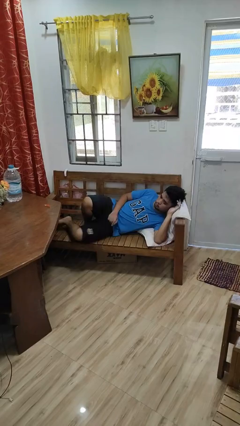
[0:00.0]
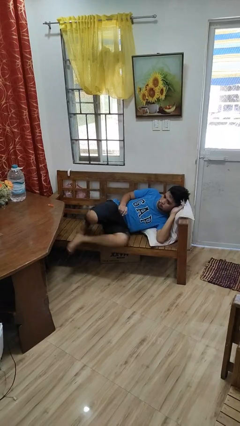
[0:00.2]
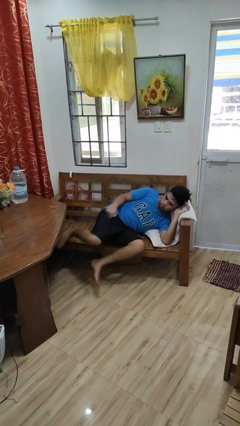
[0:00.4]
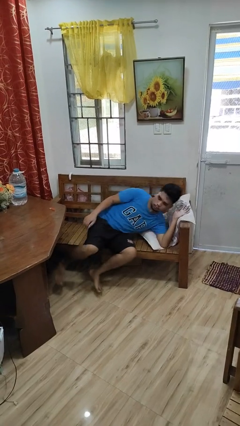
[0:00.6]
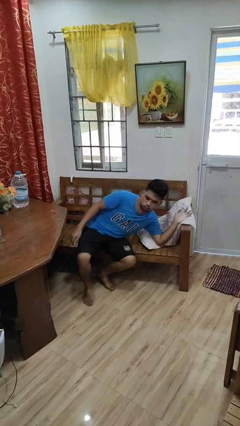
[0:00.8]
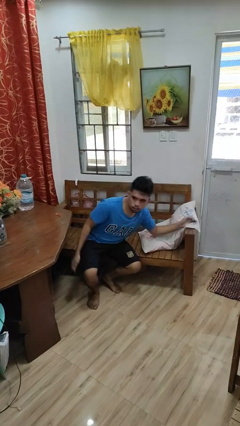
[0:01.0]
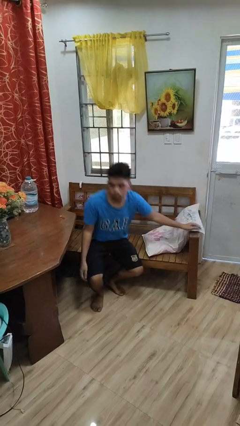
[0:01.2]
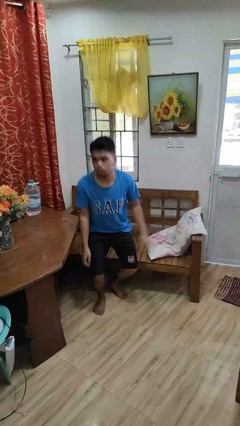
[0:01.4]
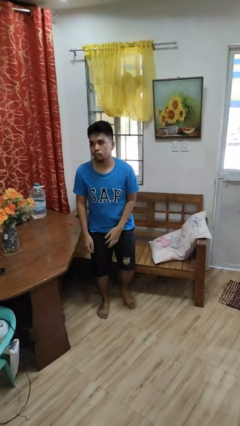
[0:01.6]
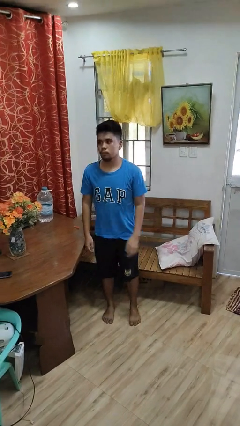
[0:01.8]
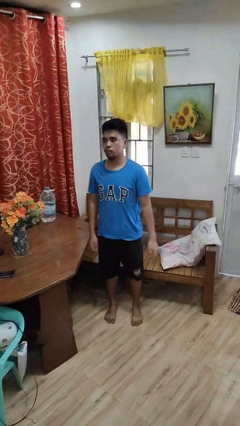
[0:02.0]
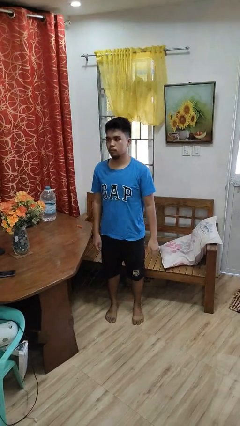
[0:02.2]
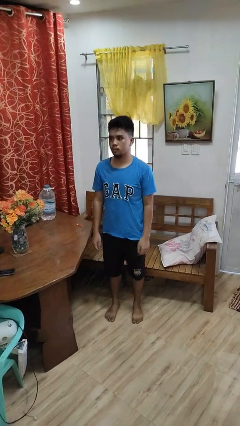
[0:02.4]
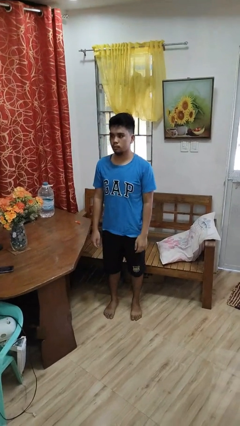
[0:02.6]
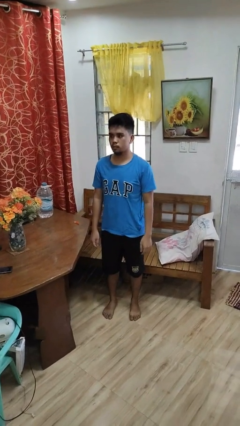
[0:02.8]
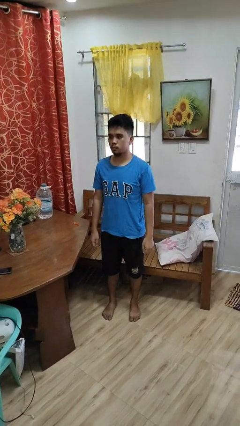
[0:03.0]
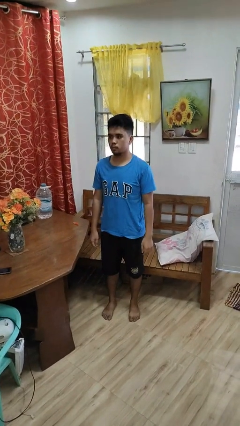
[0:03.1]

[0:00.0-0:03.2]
person stands up

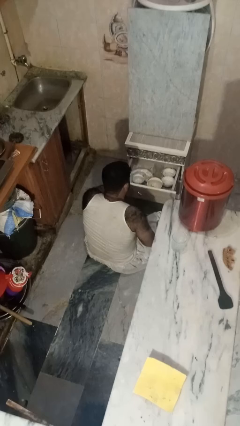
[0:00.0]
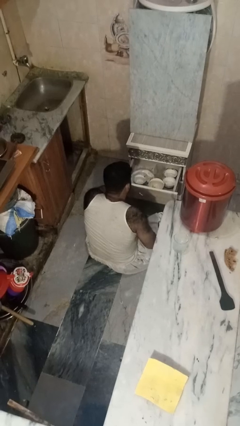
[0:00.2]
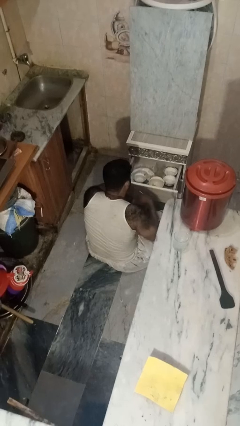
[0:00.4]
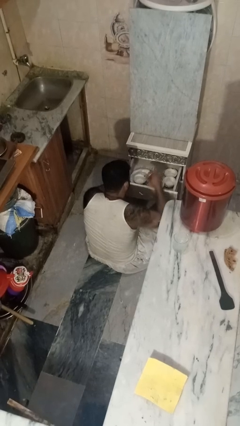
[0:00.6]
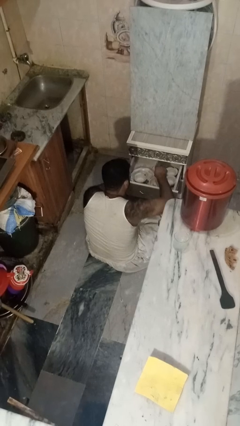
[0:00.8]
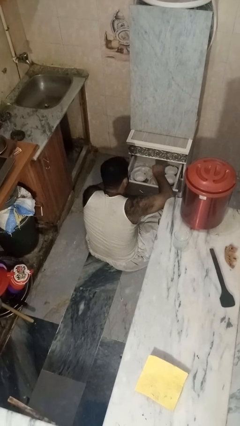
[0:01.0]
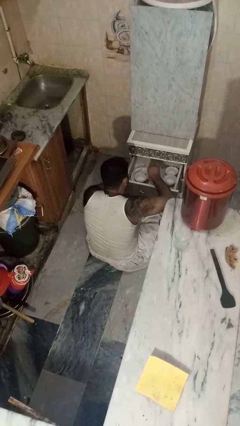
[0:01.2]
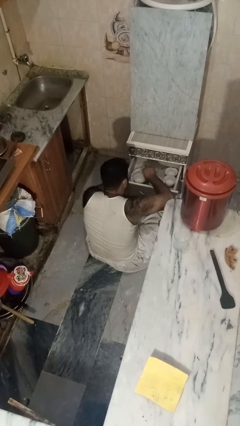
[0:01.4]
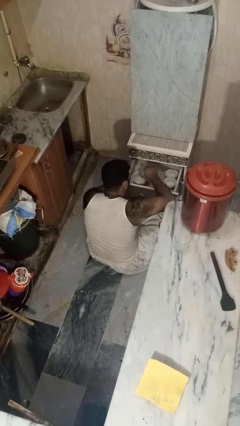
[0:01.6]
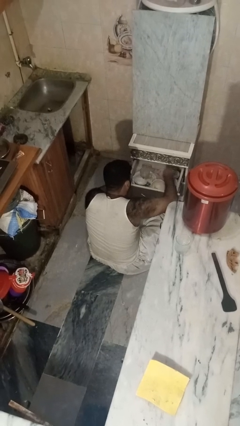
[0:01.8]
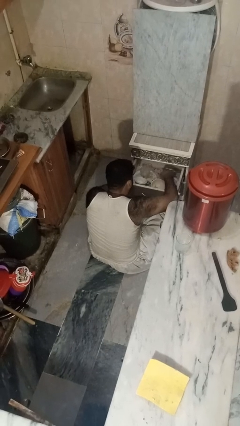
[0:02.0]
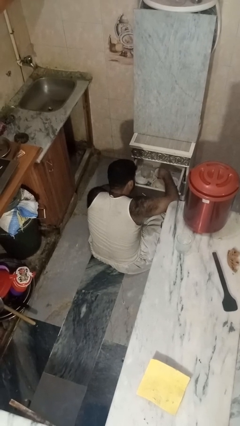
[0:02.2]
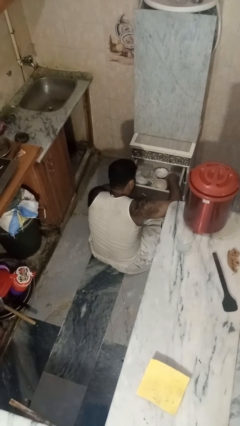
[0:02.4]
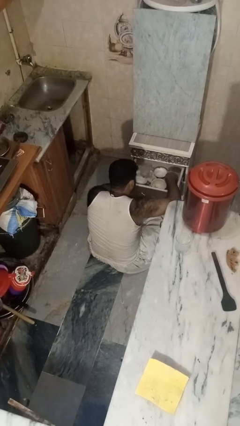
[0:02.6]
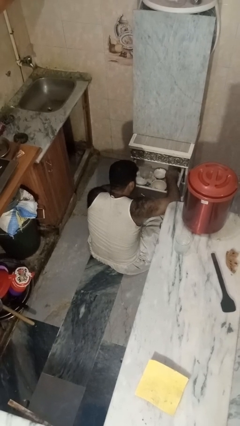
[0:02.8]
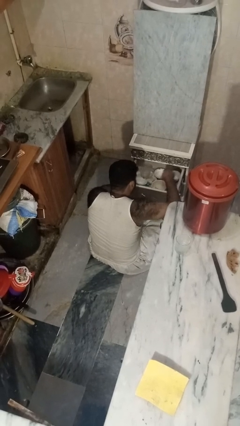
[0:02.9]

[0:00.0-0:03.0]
person searches in kitchen drawer

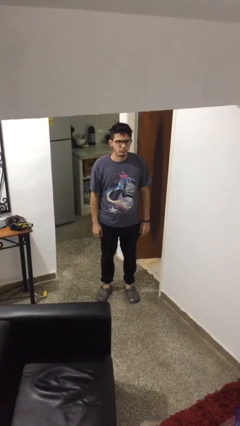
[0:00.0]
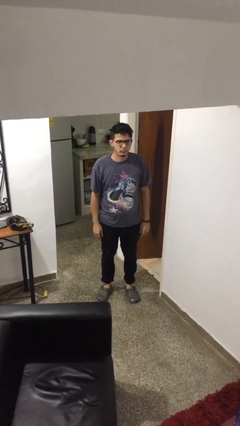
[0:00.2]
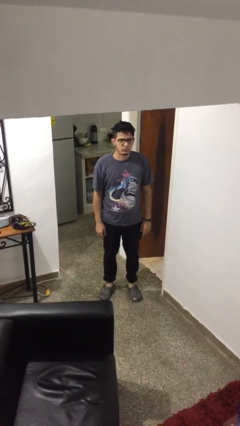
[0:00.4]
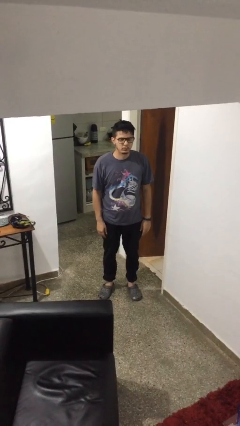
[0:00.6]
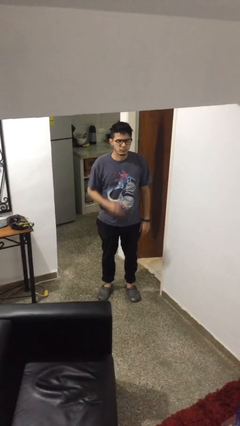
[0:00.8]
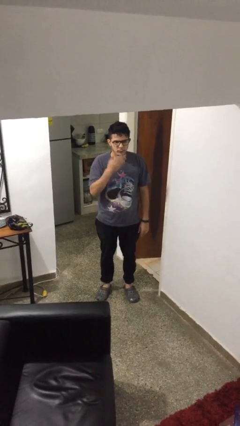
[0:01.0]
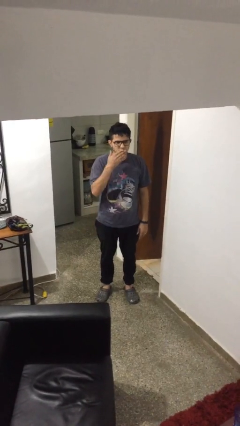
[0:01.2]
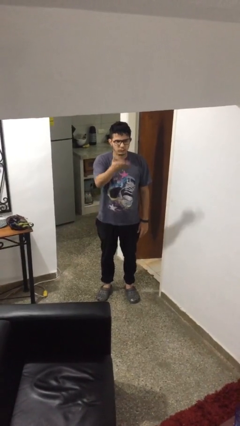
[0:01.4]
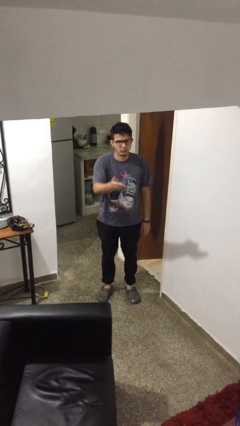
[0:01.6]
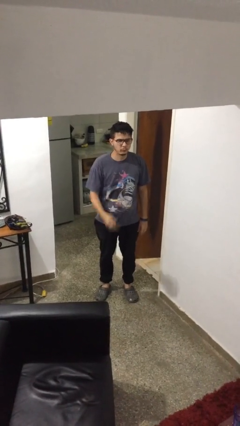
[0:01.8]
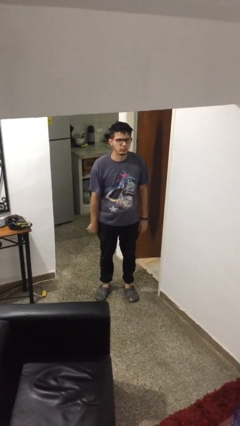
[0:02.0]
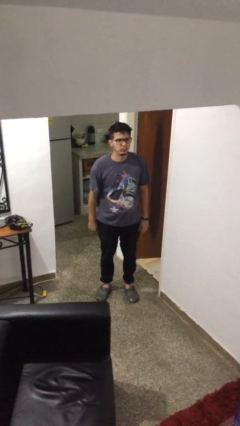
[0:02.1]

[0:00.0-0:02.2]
person gestures blow kiss

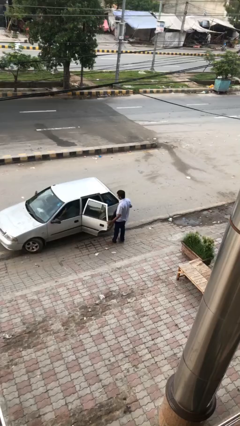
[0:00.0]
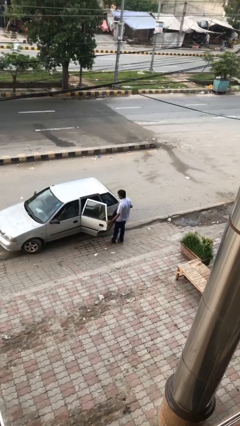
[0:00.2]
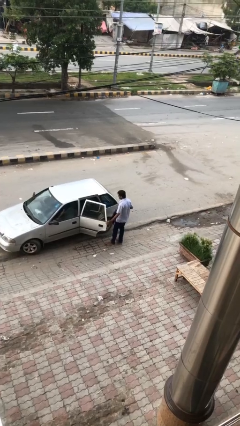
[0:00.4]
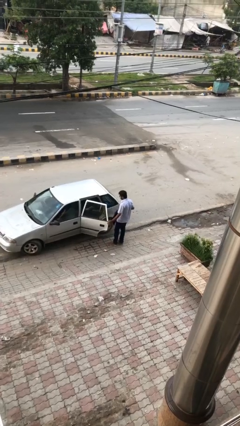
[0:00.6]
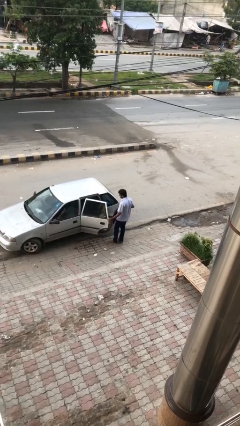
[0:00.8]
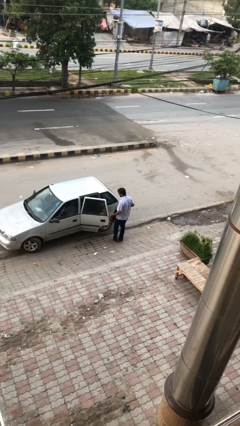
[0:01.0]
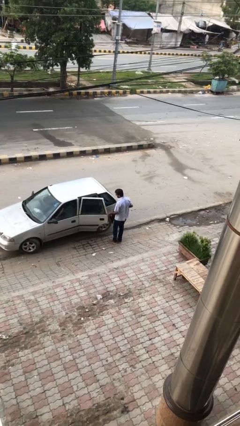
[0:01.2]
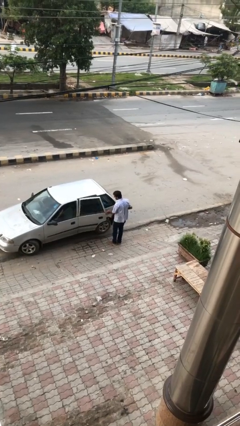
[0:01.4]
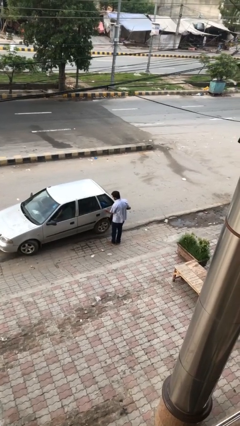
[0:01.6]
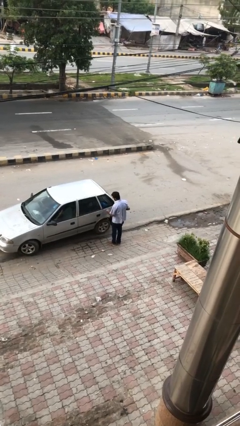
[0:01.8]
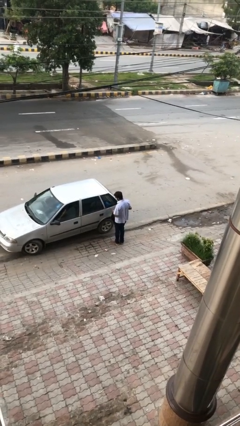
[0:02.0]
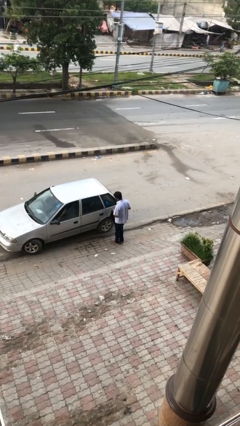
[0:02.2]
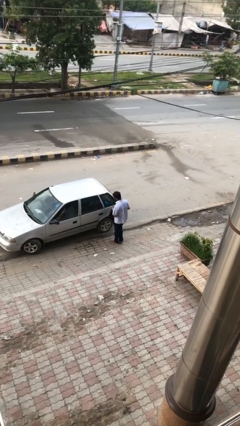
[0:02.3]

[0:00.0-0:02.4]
person closes car door

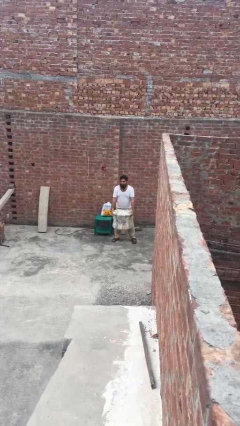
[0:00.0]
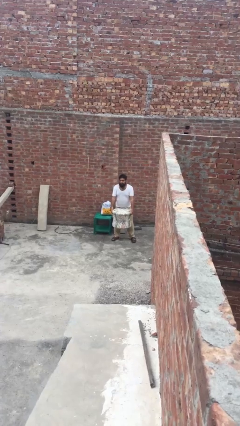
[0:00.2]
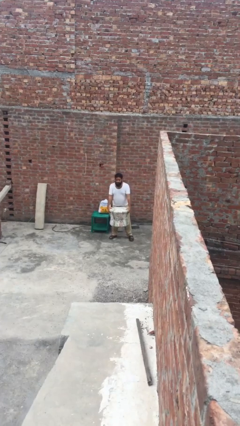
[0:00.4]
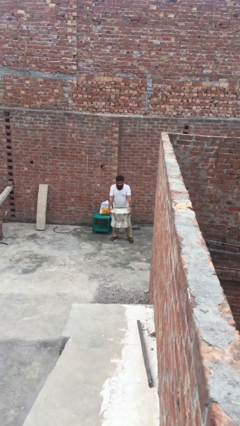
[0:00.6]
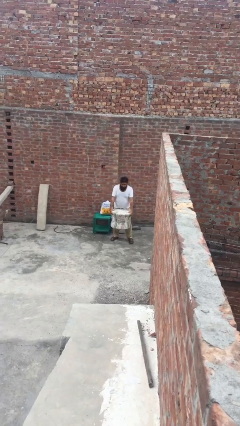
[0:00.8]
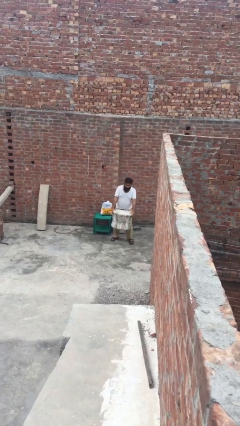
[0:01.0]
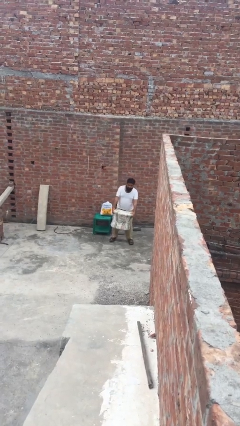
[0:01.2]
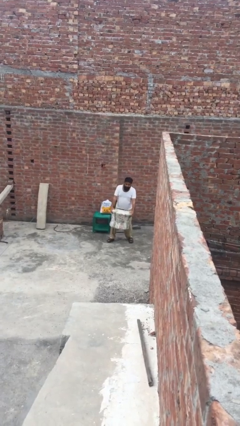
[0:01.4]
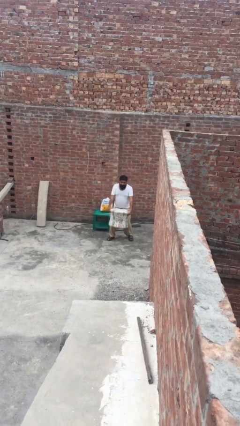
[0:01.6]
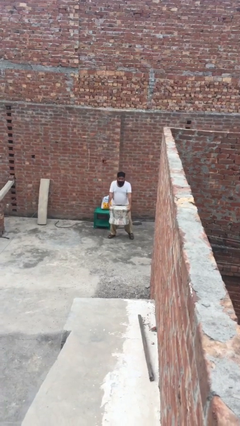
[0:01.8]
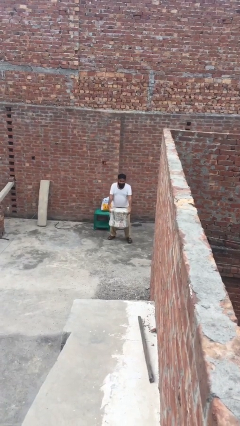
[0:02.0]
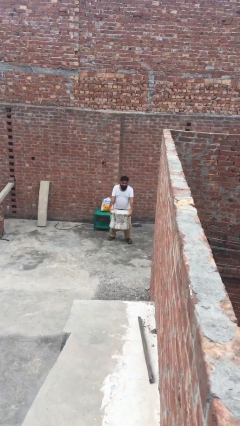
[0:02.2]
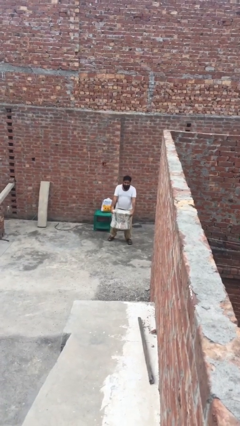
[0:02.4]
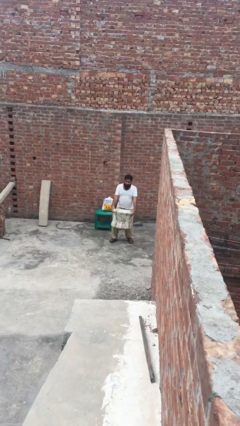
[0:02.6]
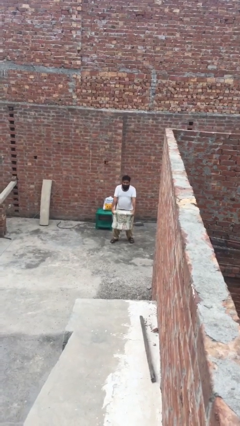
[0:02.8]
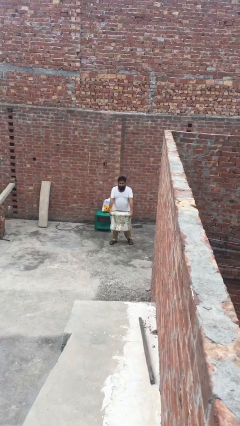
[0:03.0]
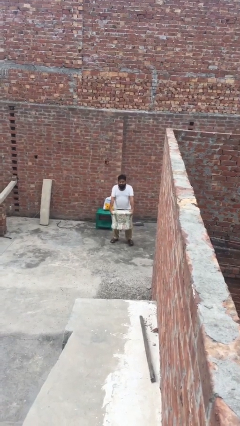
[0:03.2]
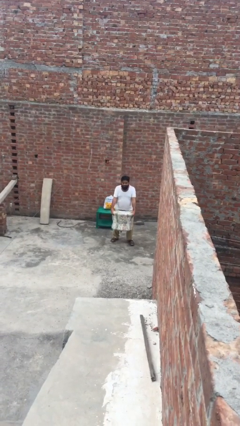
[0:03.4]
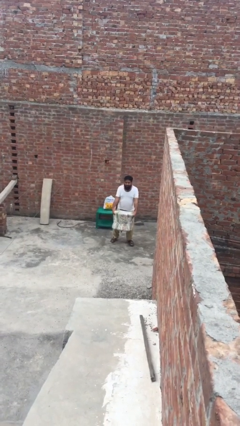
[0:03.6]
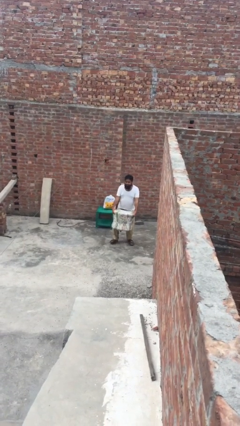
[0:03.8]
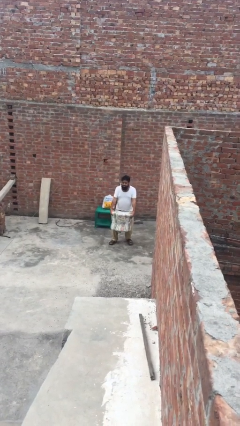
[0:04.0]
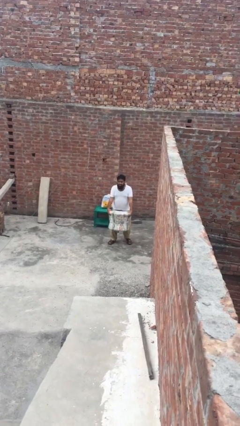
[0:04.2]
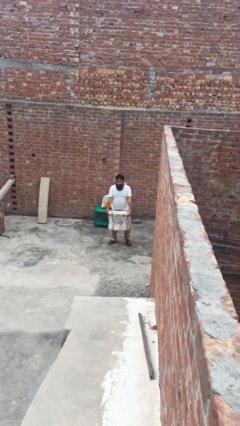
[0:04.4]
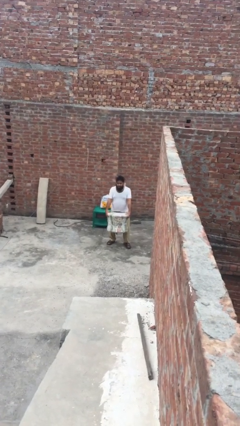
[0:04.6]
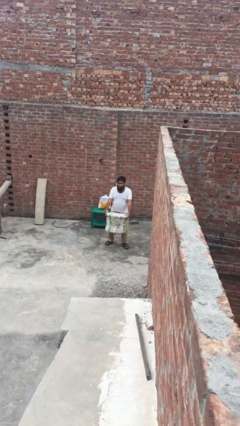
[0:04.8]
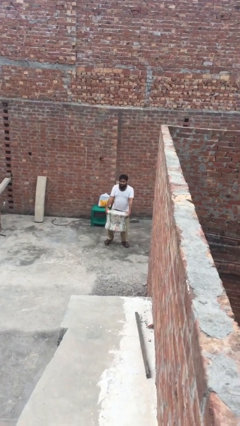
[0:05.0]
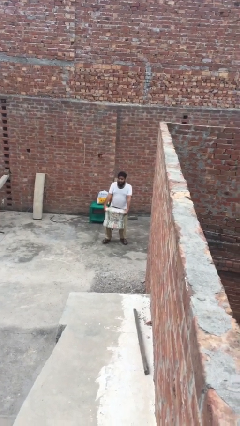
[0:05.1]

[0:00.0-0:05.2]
person carries heavy object

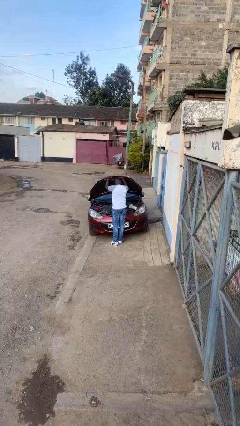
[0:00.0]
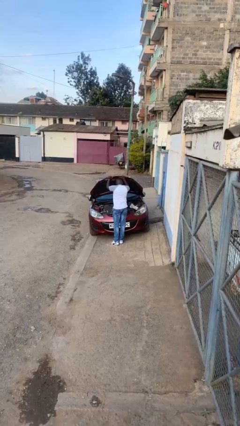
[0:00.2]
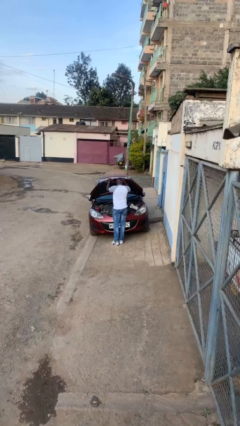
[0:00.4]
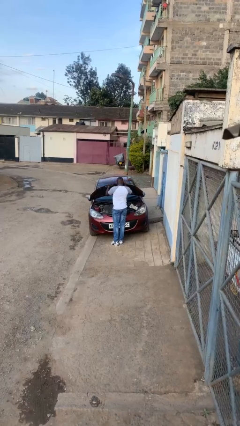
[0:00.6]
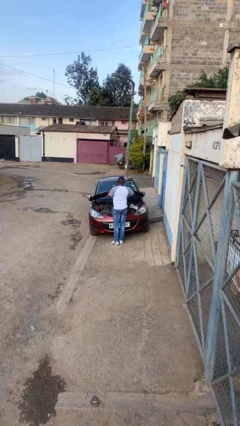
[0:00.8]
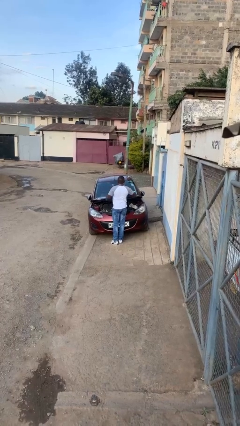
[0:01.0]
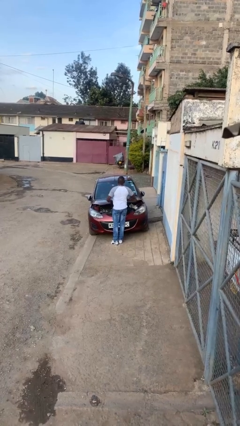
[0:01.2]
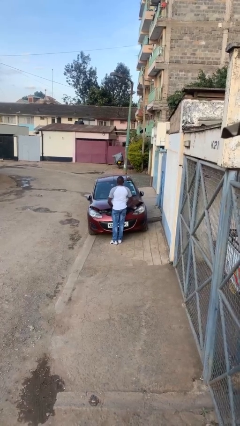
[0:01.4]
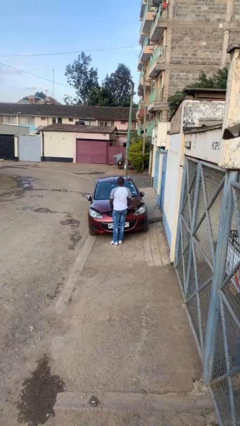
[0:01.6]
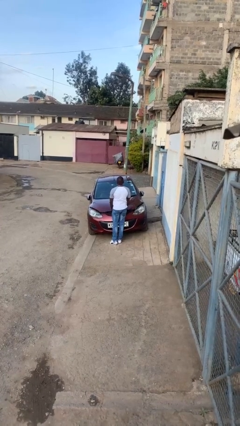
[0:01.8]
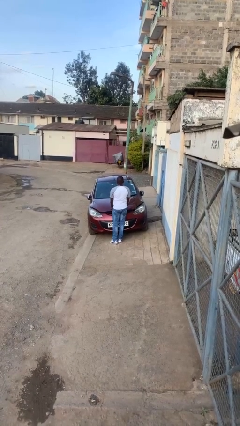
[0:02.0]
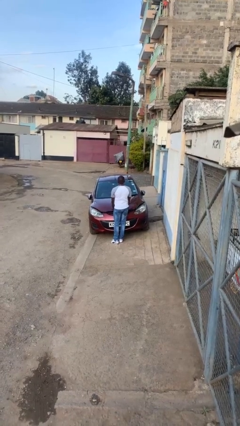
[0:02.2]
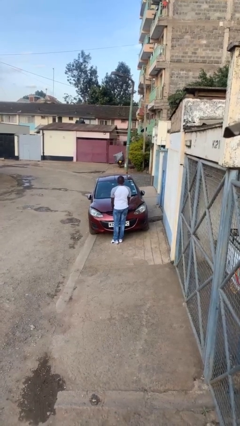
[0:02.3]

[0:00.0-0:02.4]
person closes car hood
